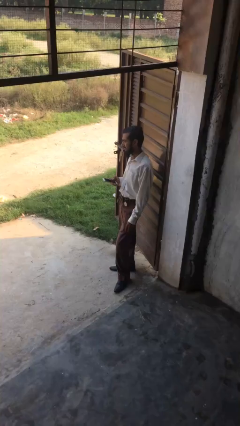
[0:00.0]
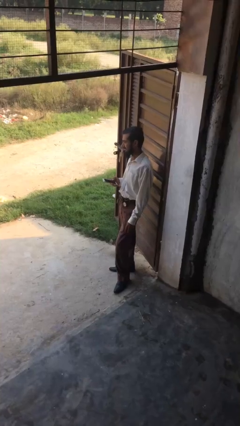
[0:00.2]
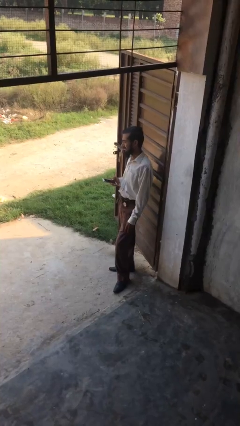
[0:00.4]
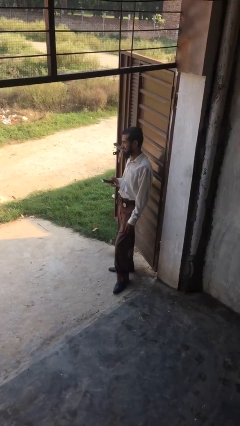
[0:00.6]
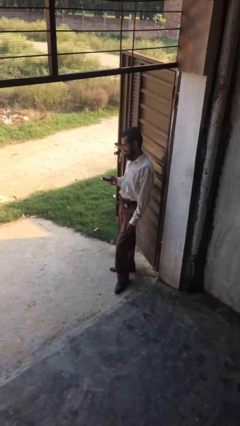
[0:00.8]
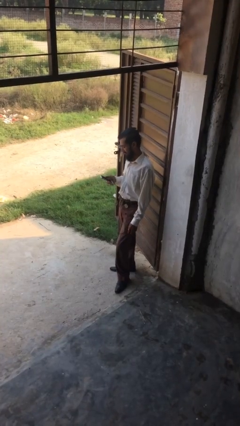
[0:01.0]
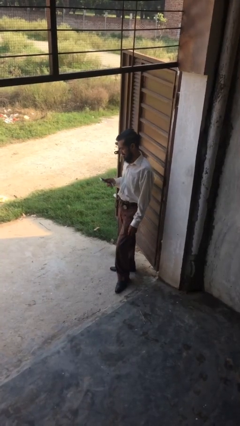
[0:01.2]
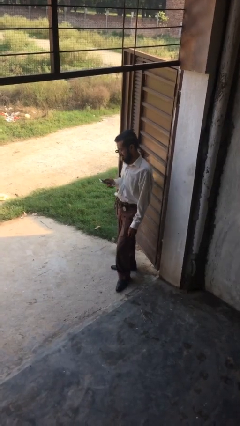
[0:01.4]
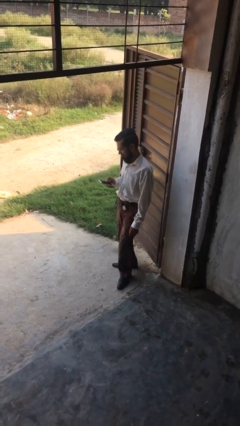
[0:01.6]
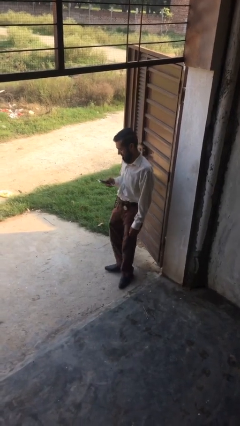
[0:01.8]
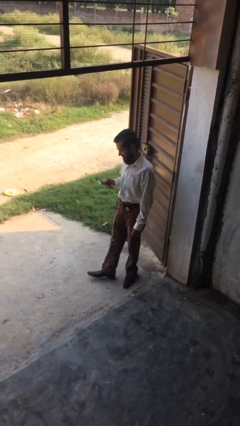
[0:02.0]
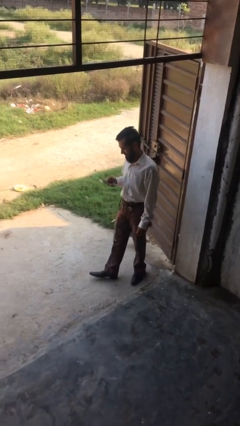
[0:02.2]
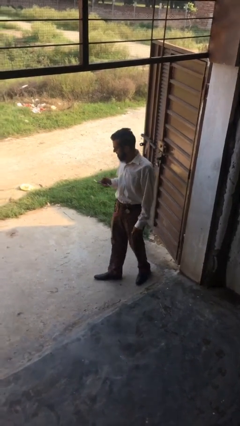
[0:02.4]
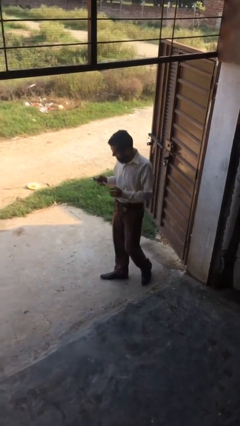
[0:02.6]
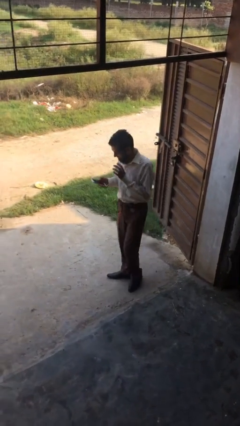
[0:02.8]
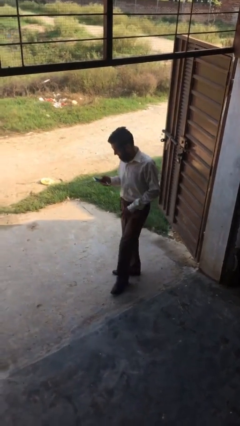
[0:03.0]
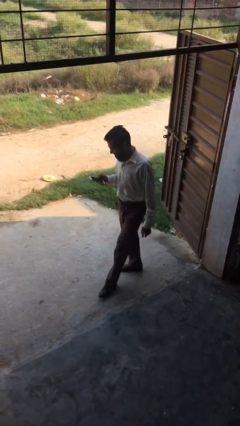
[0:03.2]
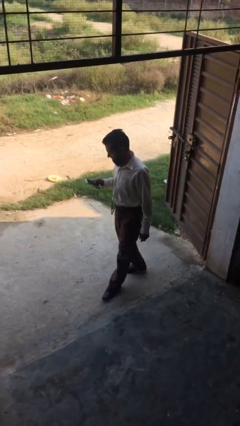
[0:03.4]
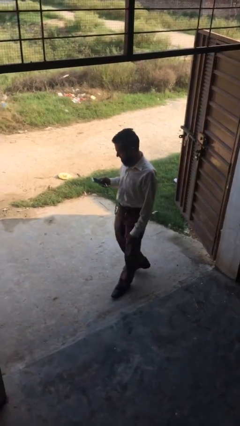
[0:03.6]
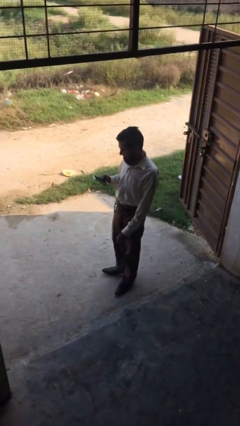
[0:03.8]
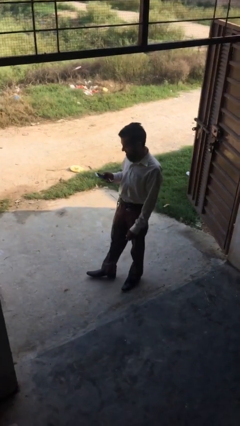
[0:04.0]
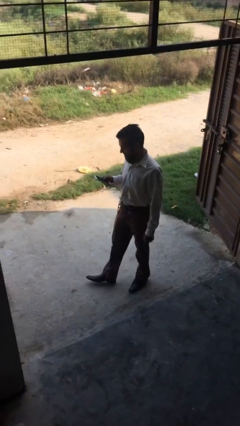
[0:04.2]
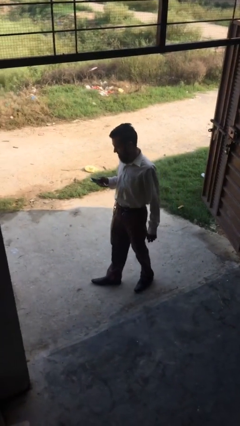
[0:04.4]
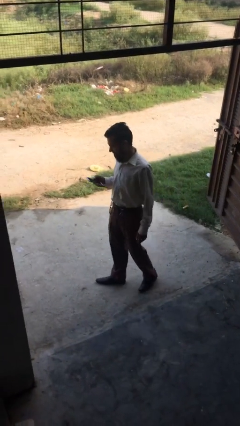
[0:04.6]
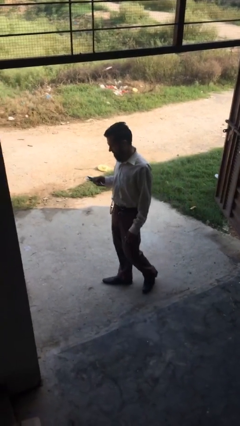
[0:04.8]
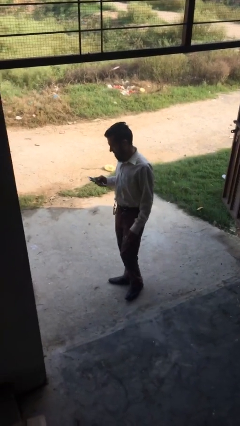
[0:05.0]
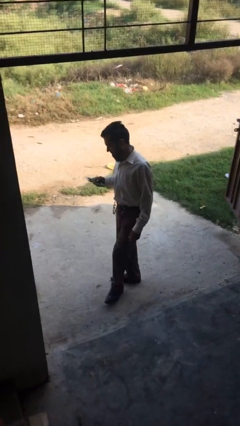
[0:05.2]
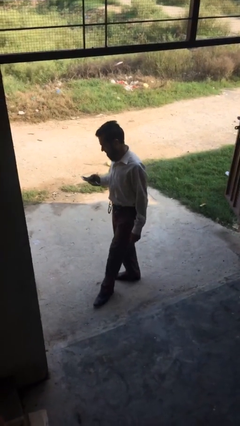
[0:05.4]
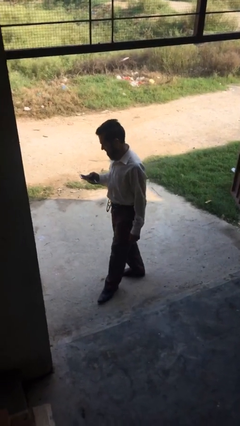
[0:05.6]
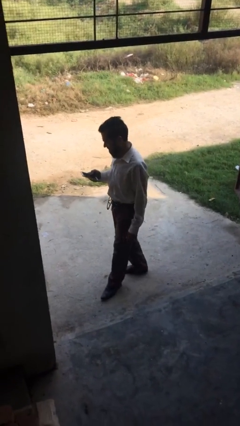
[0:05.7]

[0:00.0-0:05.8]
person texts on phone

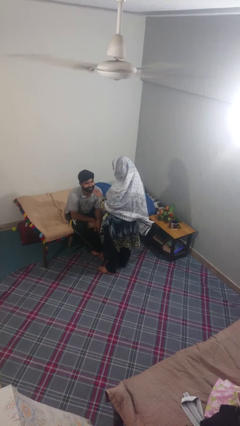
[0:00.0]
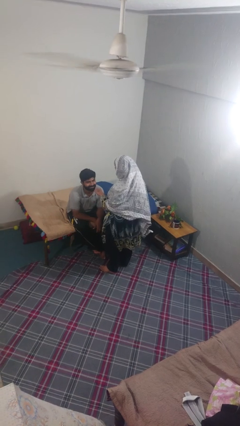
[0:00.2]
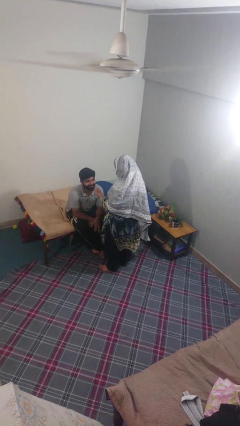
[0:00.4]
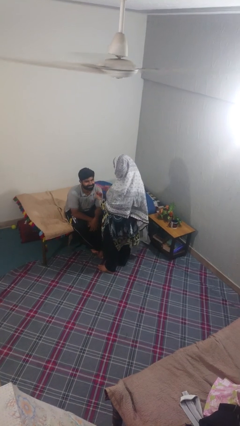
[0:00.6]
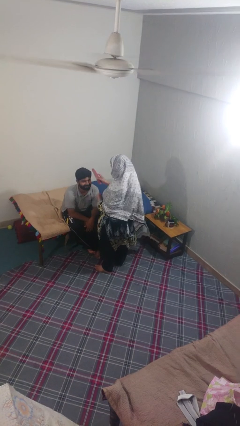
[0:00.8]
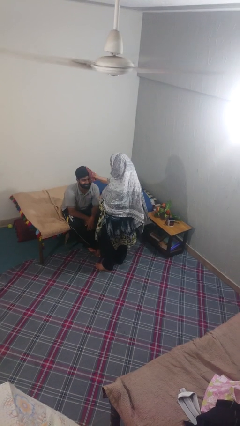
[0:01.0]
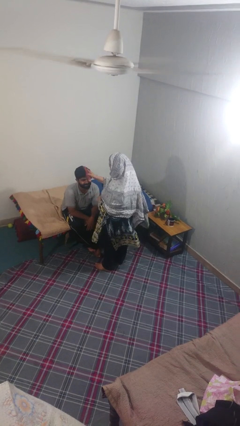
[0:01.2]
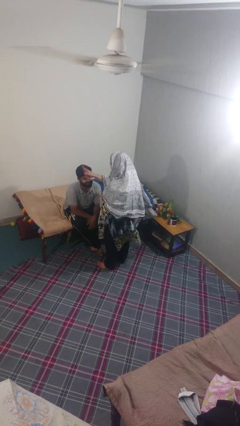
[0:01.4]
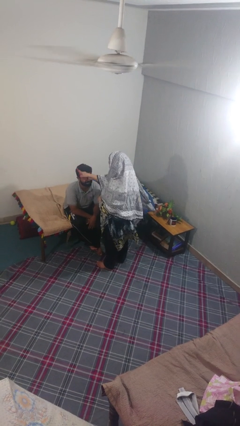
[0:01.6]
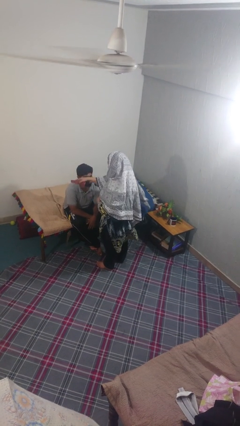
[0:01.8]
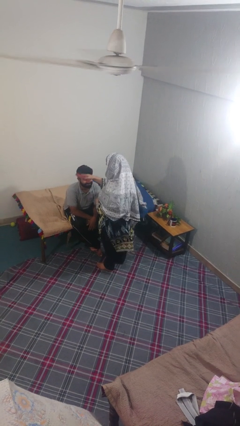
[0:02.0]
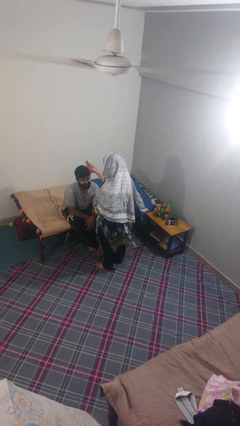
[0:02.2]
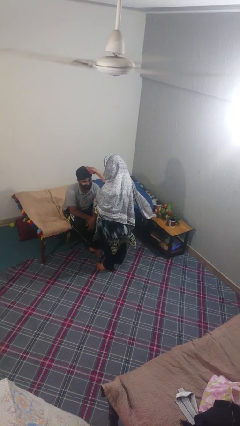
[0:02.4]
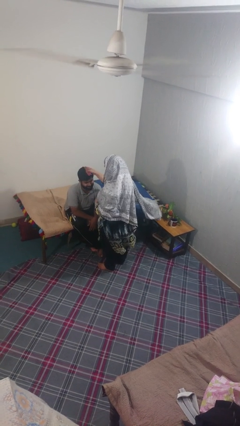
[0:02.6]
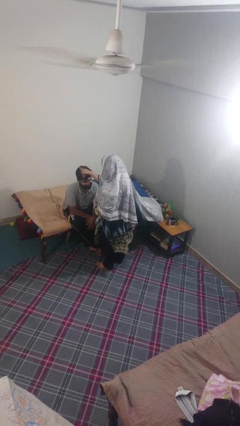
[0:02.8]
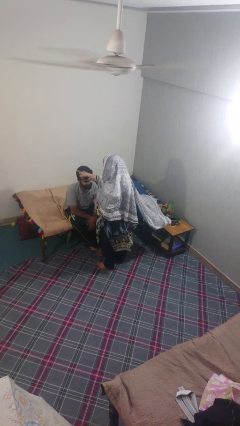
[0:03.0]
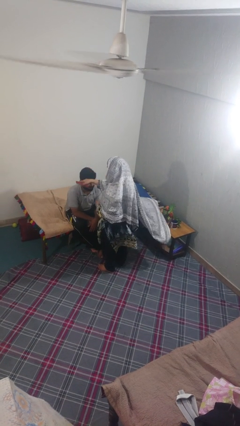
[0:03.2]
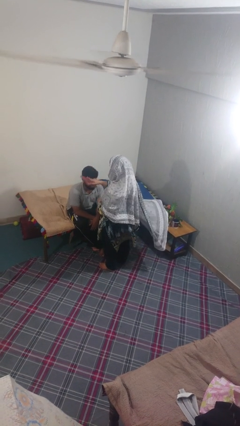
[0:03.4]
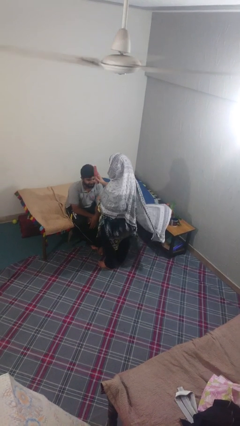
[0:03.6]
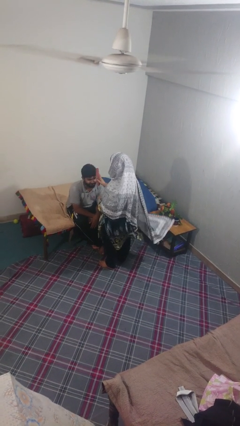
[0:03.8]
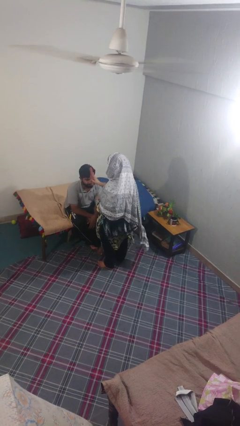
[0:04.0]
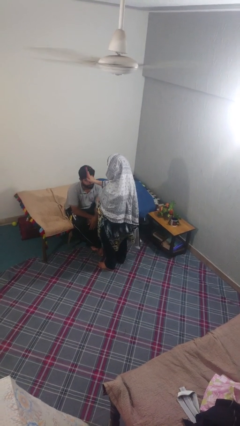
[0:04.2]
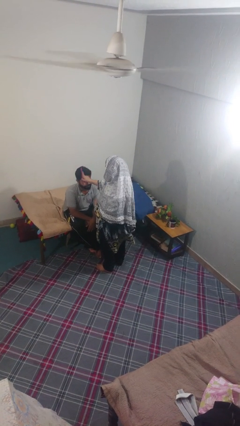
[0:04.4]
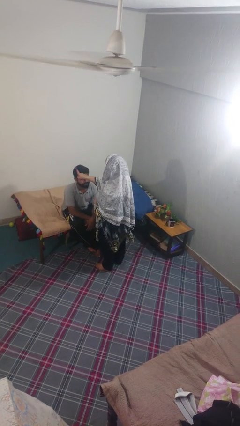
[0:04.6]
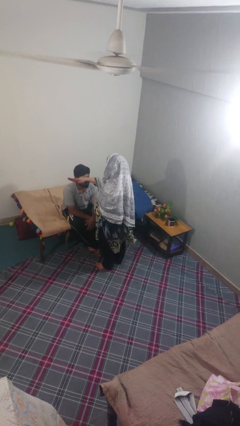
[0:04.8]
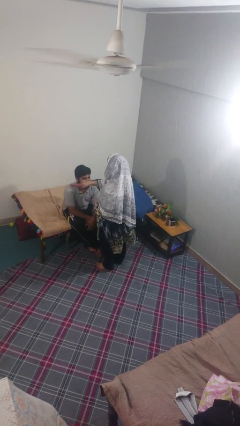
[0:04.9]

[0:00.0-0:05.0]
person brushes hair of person

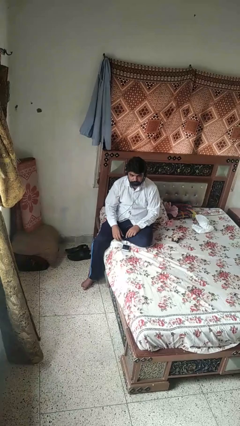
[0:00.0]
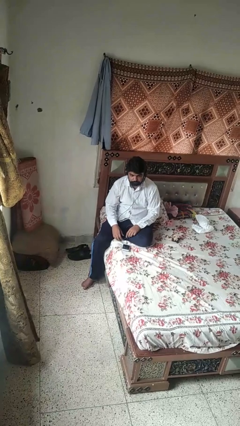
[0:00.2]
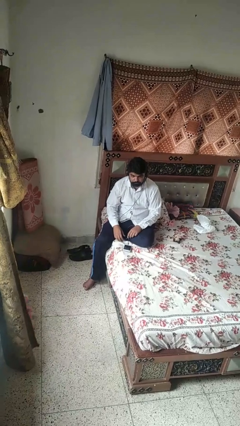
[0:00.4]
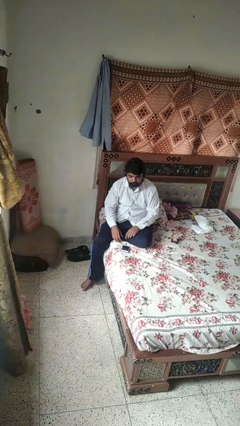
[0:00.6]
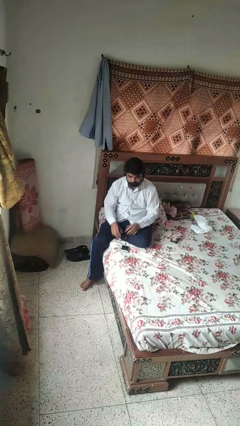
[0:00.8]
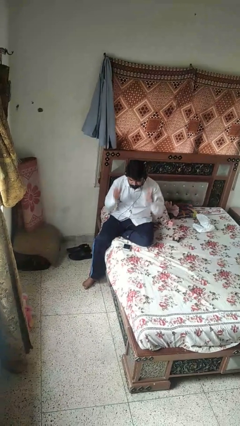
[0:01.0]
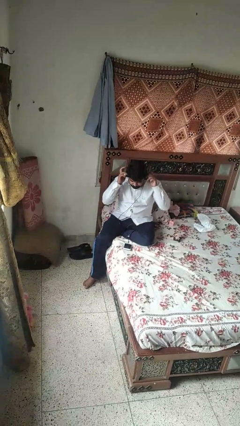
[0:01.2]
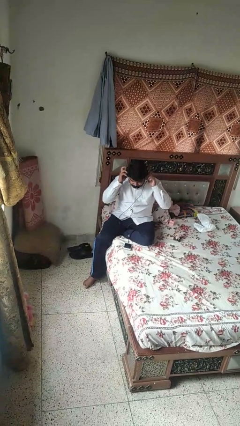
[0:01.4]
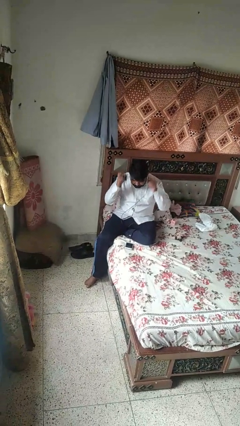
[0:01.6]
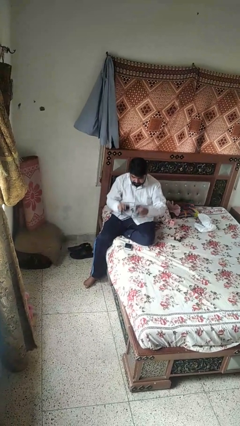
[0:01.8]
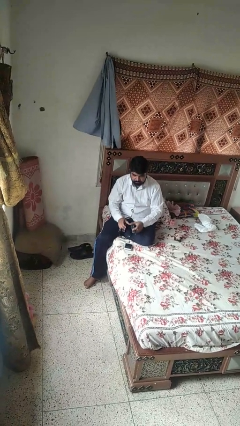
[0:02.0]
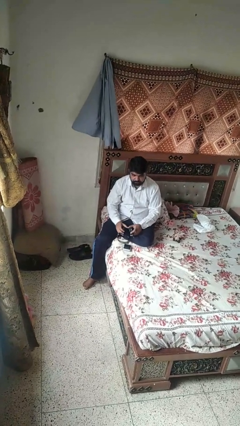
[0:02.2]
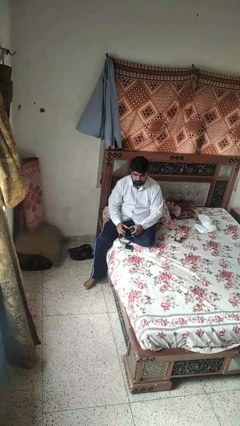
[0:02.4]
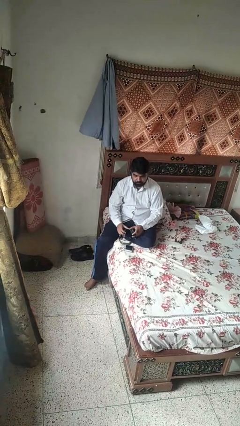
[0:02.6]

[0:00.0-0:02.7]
person takes off headphones

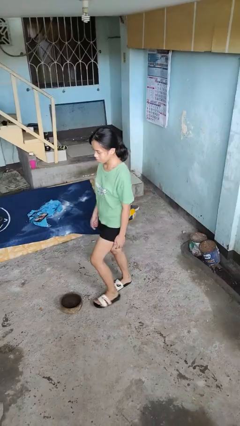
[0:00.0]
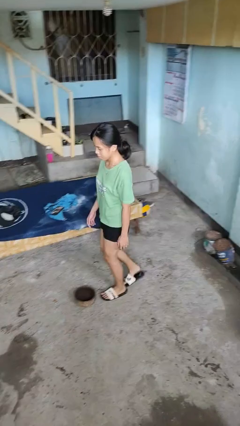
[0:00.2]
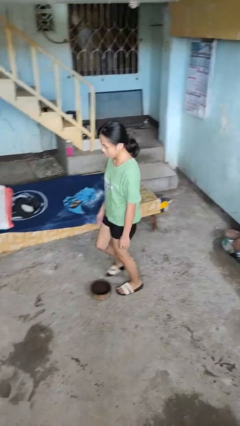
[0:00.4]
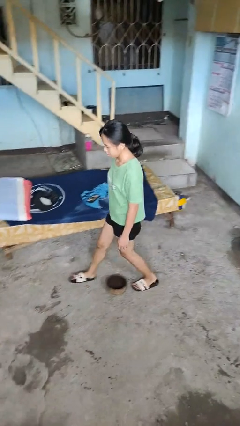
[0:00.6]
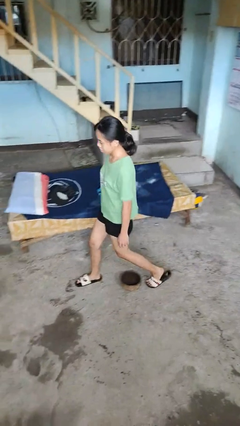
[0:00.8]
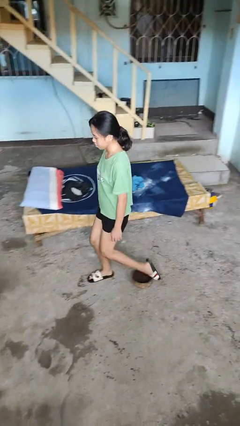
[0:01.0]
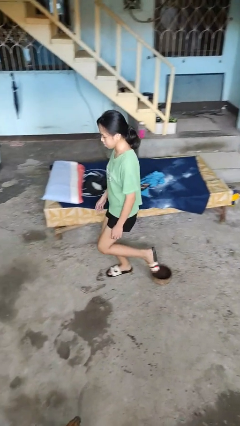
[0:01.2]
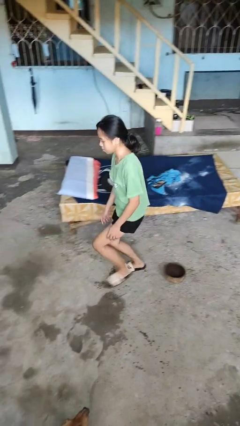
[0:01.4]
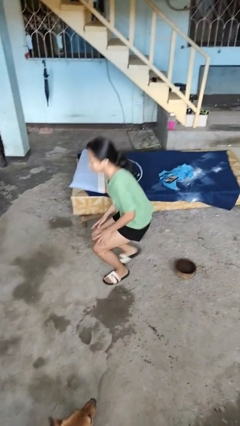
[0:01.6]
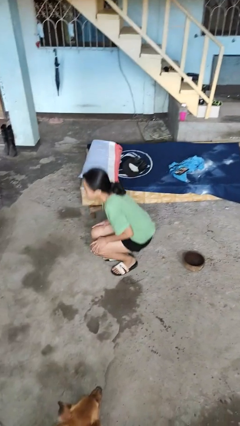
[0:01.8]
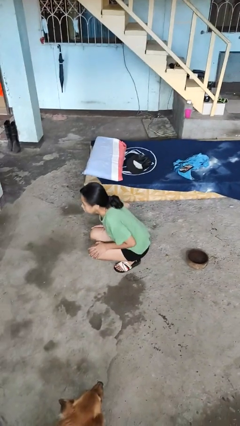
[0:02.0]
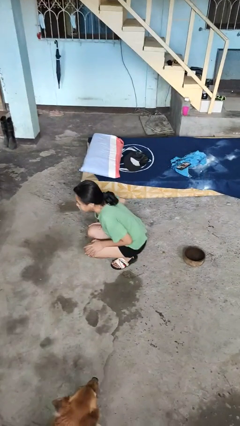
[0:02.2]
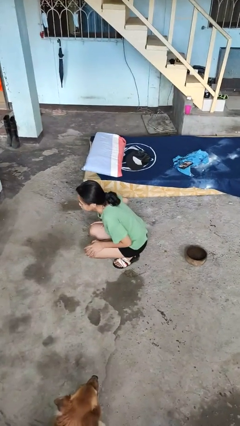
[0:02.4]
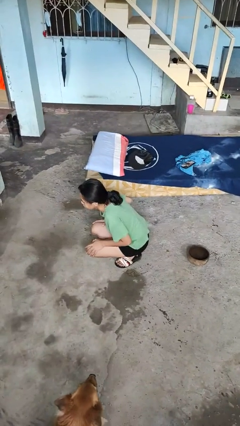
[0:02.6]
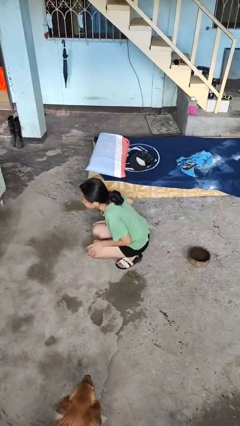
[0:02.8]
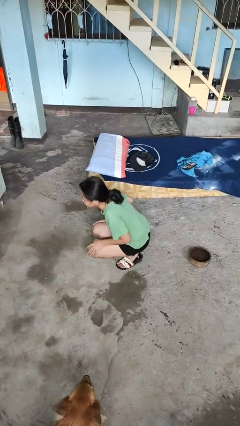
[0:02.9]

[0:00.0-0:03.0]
person trips on object on floor

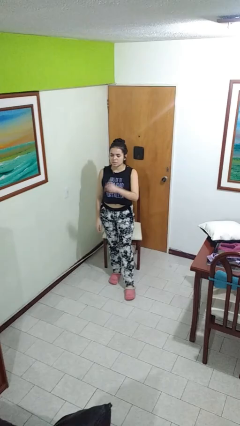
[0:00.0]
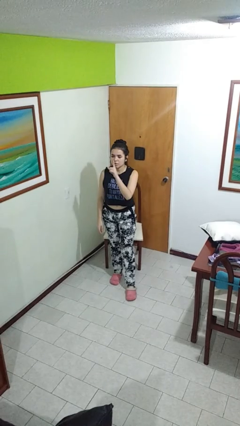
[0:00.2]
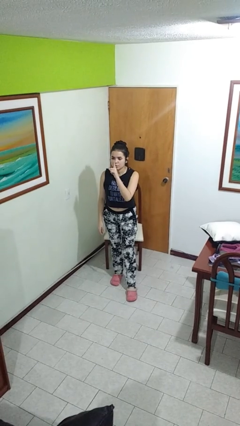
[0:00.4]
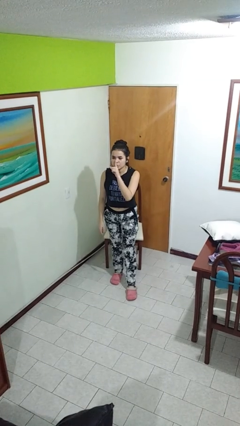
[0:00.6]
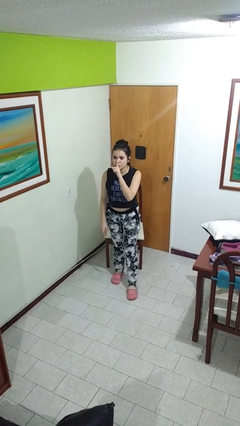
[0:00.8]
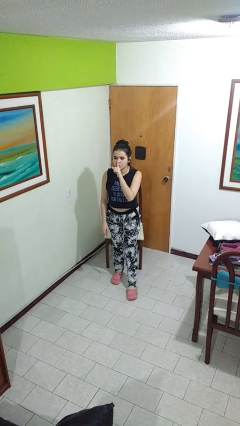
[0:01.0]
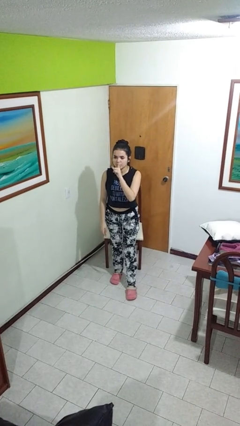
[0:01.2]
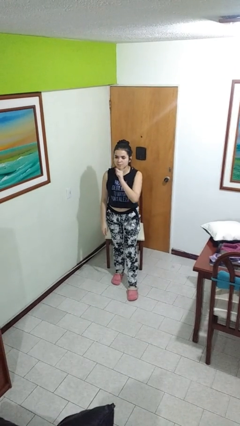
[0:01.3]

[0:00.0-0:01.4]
person gestures be quiet
